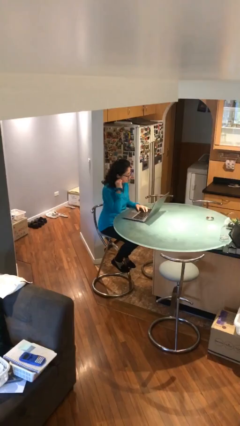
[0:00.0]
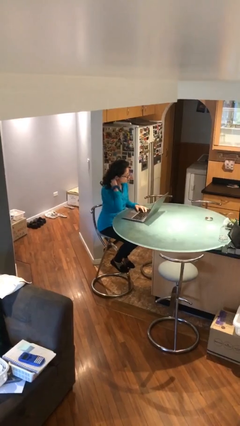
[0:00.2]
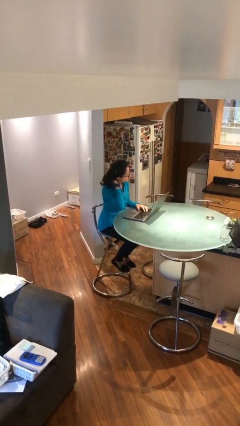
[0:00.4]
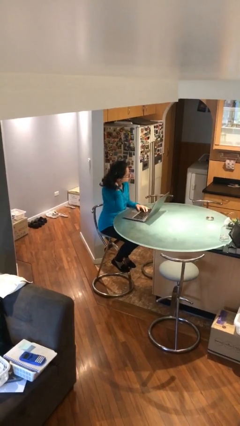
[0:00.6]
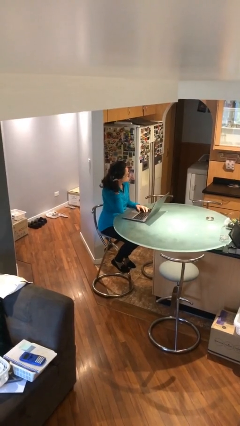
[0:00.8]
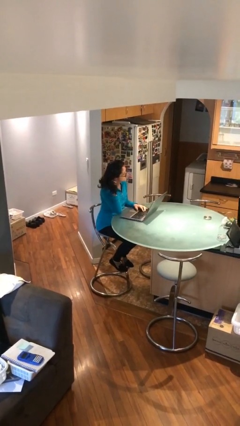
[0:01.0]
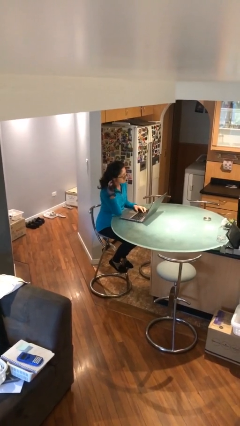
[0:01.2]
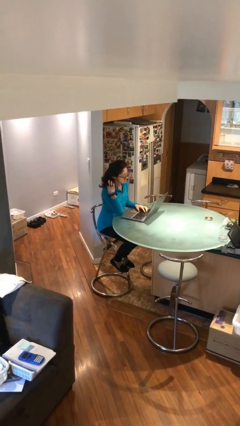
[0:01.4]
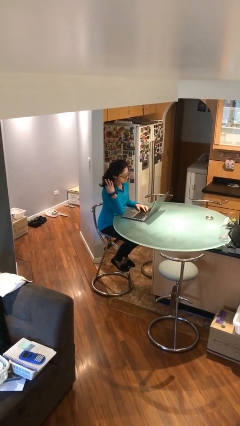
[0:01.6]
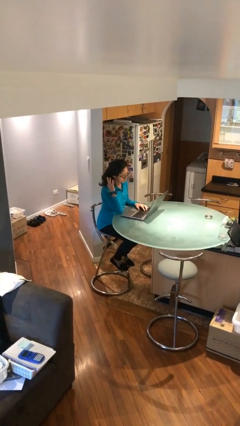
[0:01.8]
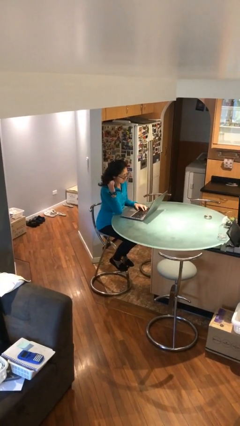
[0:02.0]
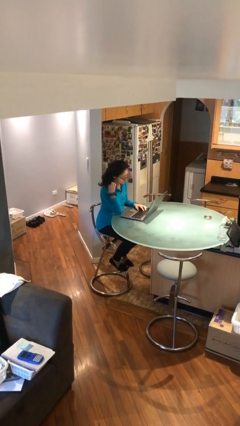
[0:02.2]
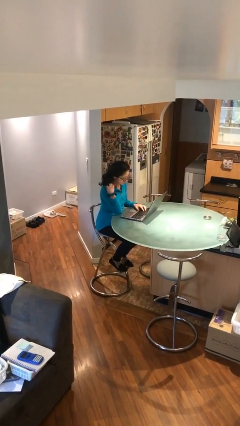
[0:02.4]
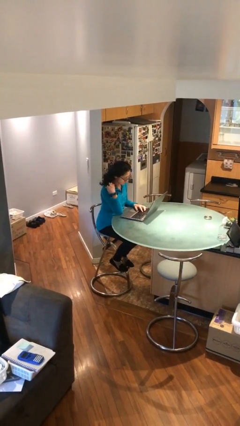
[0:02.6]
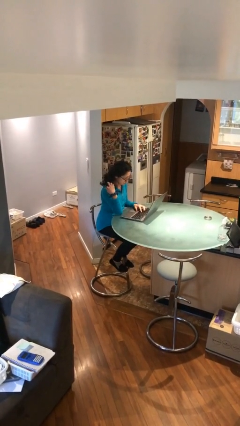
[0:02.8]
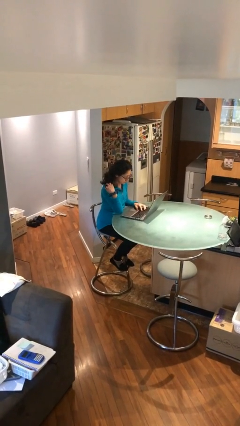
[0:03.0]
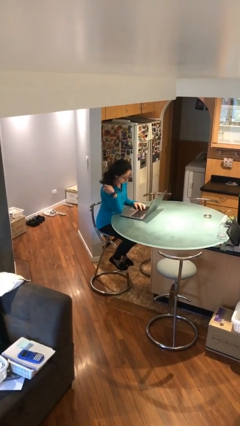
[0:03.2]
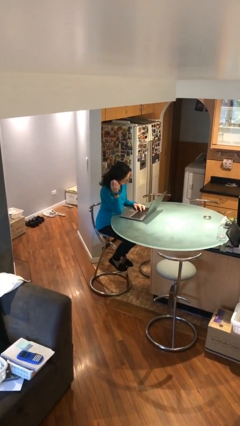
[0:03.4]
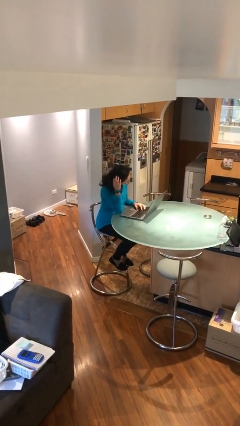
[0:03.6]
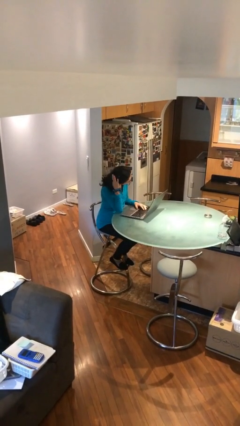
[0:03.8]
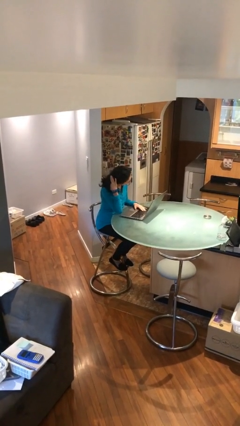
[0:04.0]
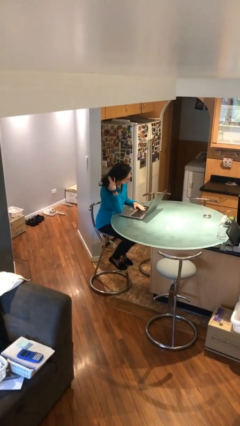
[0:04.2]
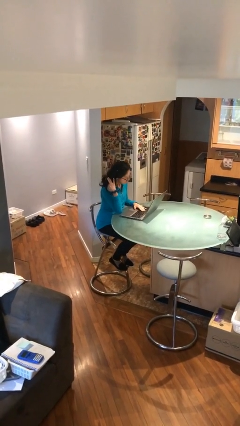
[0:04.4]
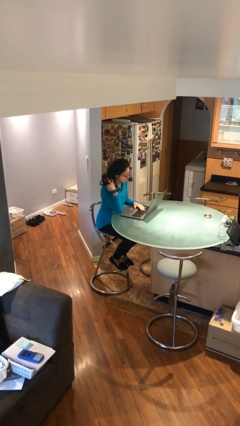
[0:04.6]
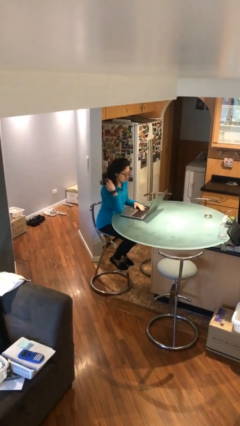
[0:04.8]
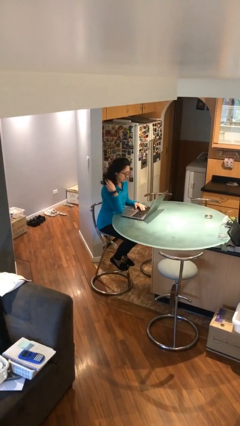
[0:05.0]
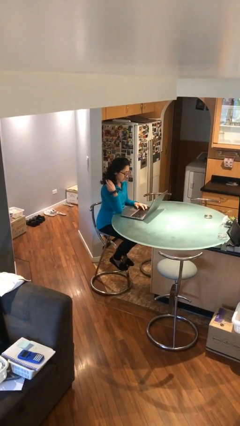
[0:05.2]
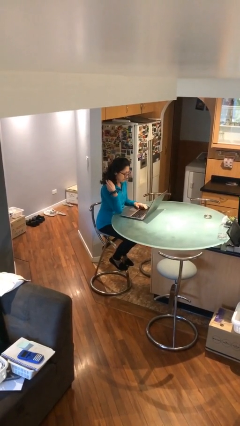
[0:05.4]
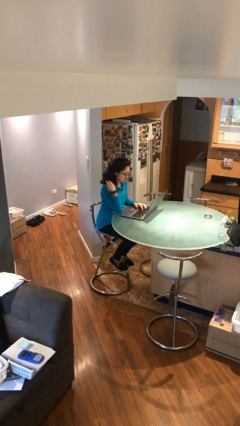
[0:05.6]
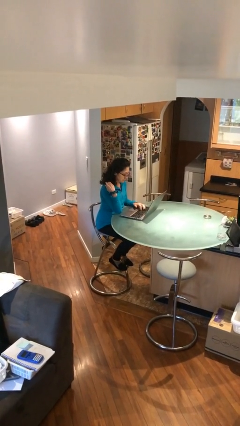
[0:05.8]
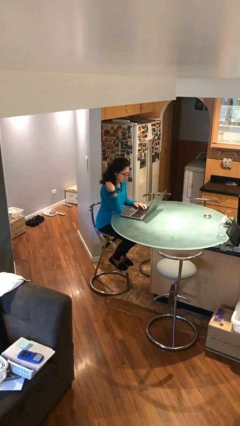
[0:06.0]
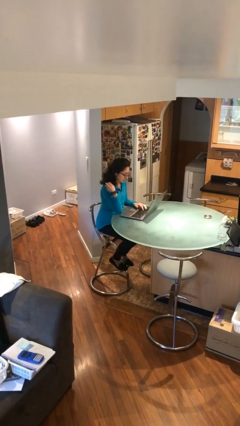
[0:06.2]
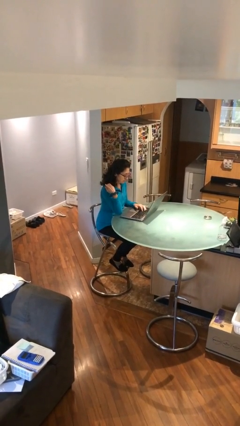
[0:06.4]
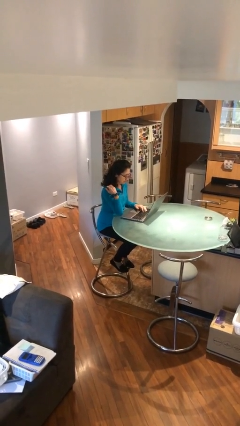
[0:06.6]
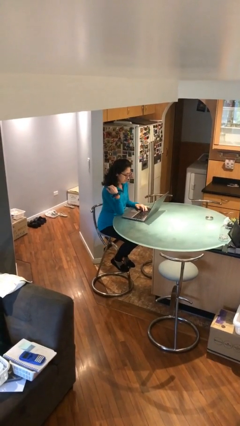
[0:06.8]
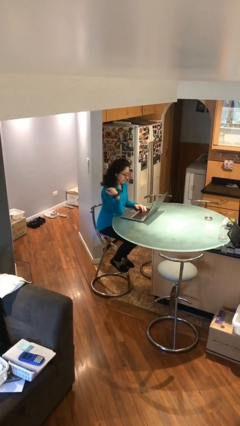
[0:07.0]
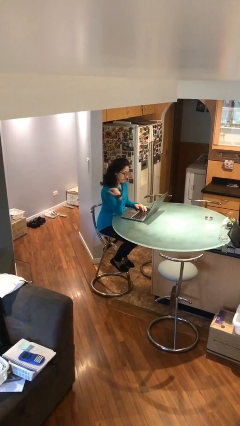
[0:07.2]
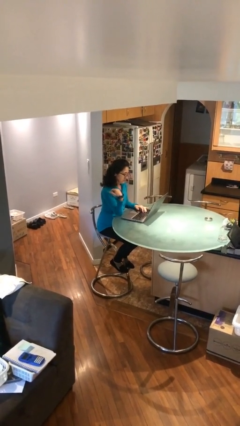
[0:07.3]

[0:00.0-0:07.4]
person interacts with laptop

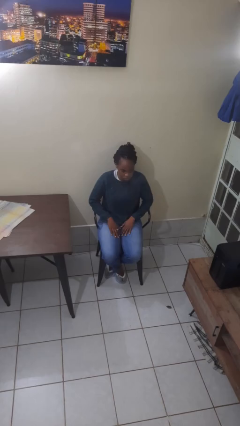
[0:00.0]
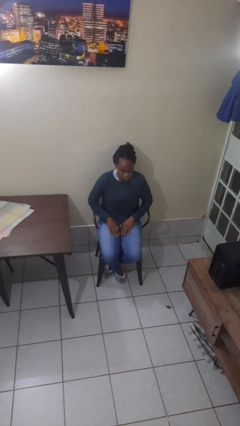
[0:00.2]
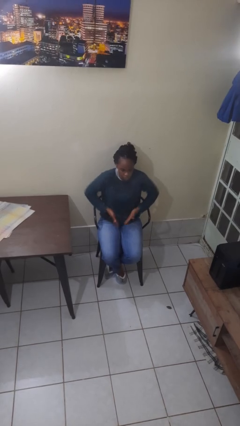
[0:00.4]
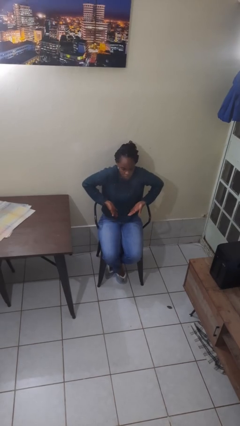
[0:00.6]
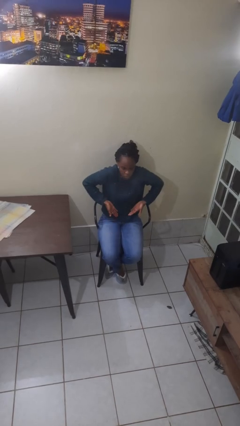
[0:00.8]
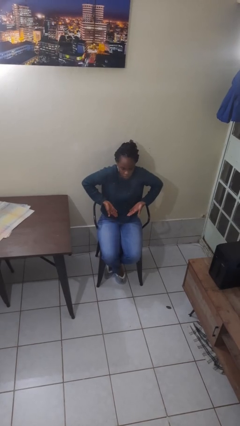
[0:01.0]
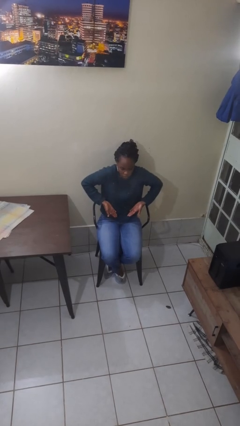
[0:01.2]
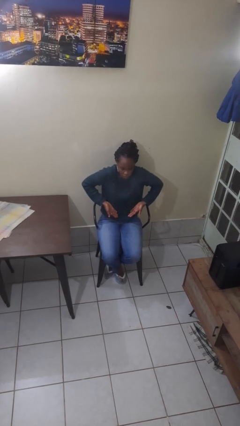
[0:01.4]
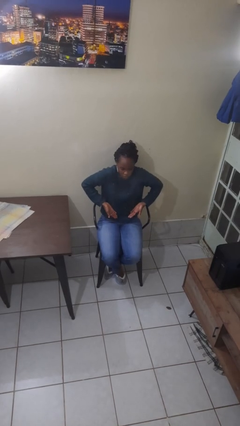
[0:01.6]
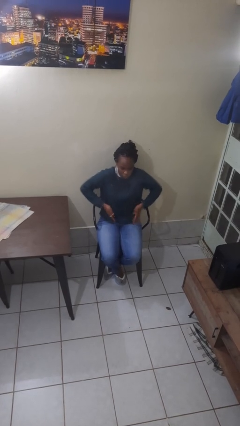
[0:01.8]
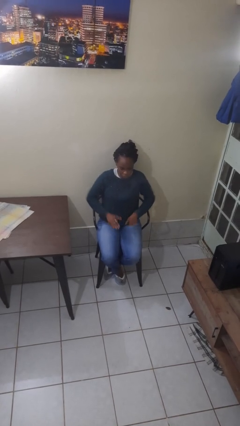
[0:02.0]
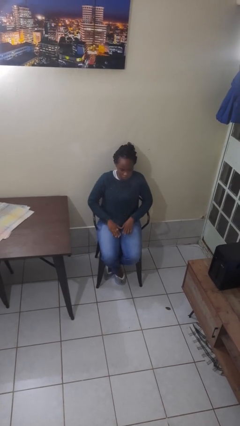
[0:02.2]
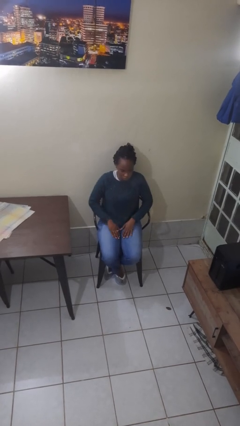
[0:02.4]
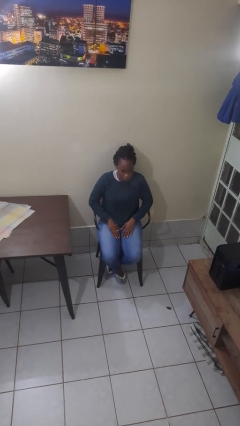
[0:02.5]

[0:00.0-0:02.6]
person shrugs

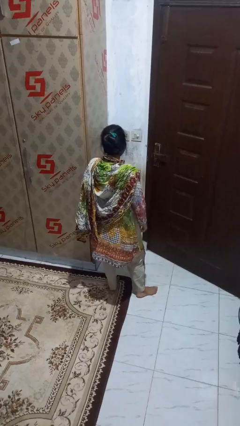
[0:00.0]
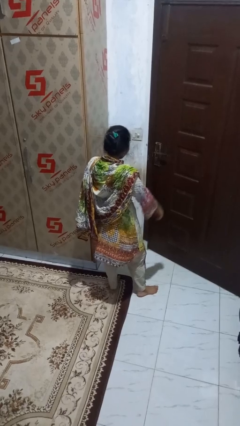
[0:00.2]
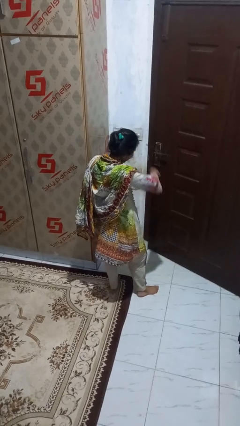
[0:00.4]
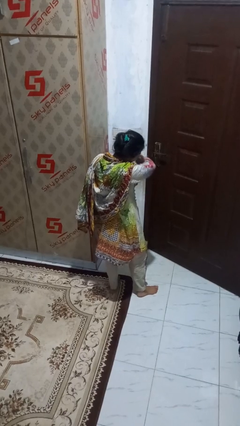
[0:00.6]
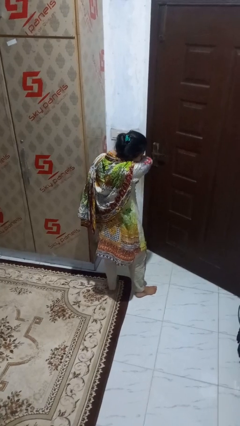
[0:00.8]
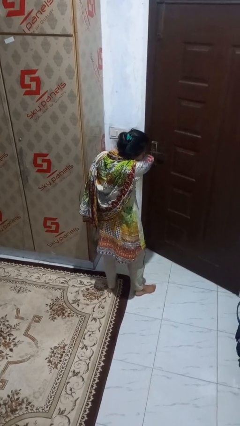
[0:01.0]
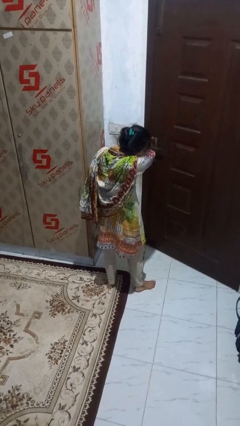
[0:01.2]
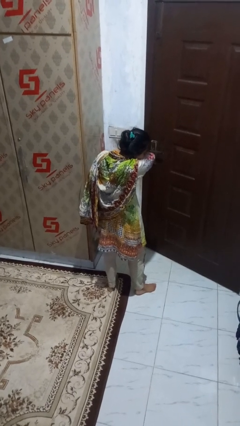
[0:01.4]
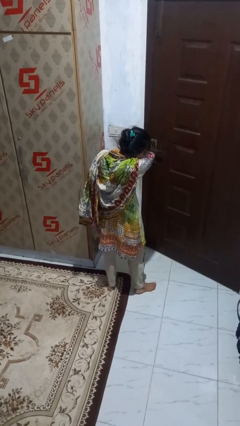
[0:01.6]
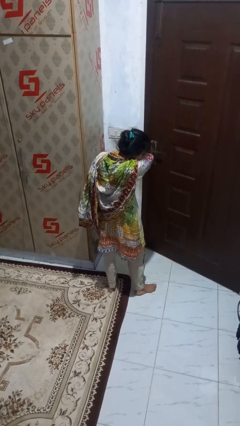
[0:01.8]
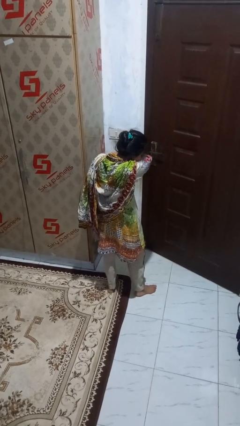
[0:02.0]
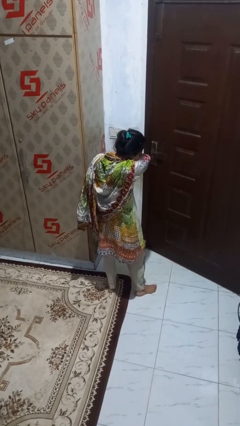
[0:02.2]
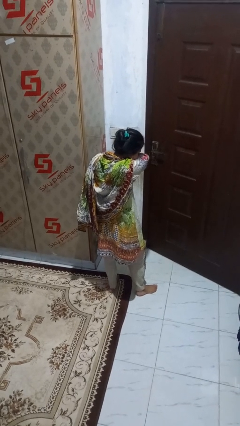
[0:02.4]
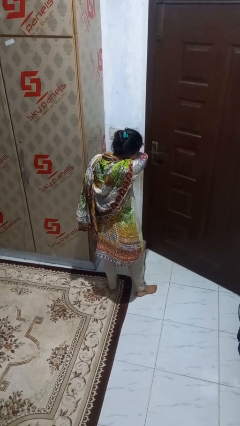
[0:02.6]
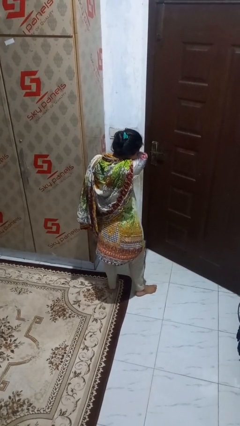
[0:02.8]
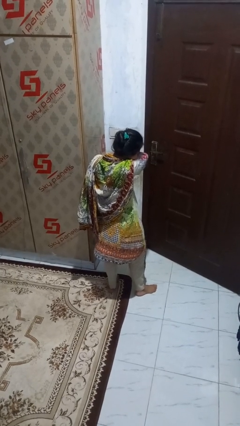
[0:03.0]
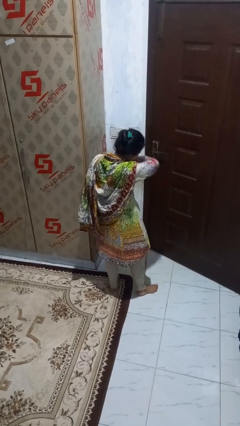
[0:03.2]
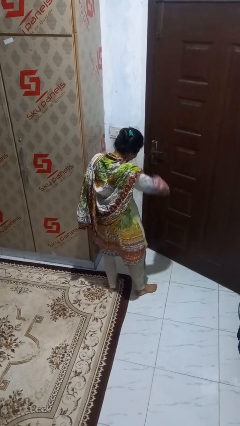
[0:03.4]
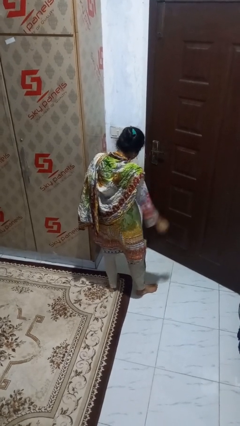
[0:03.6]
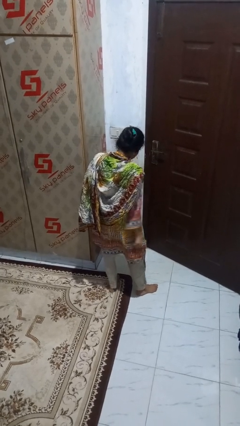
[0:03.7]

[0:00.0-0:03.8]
person sneezes into arm

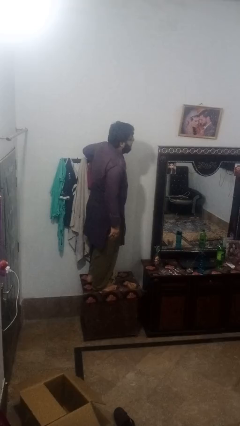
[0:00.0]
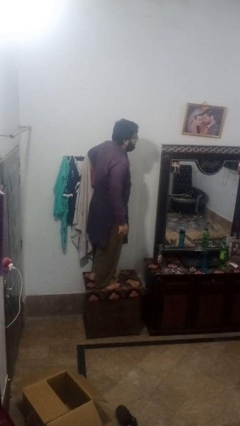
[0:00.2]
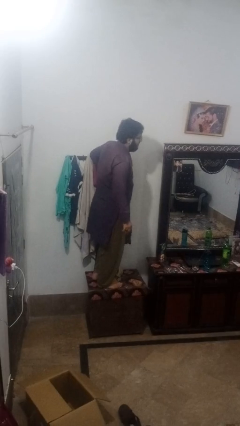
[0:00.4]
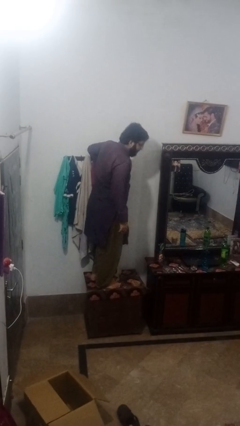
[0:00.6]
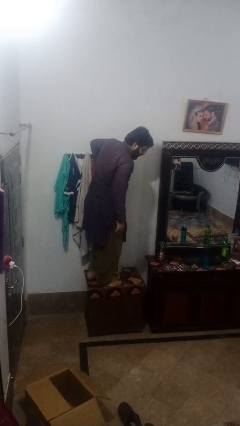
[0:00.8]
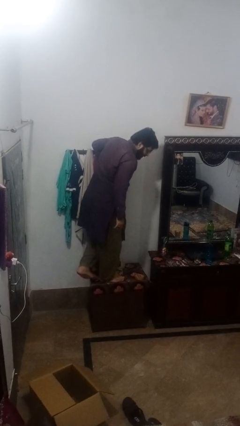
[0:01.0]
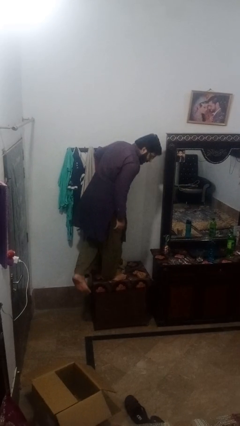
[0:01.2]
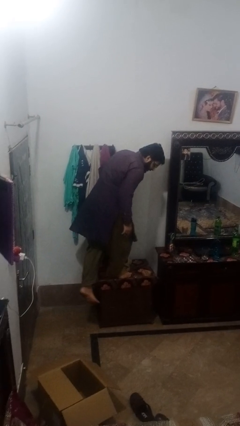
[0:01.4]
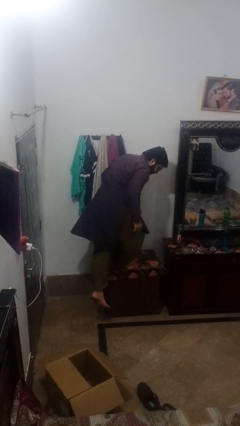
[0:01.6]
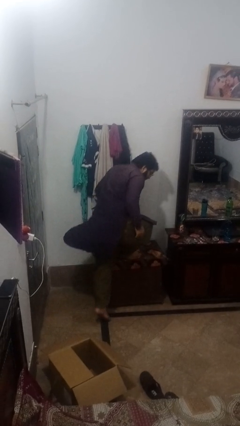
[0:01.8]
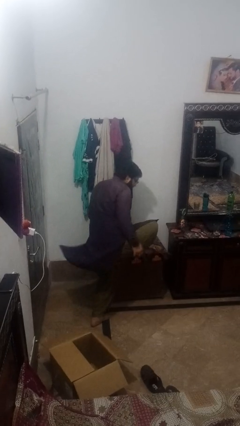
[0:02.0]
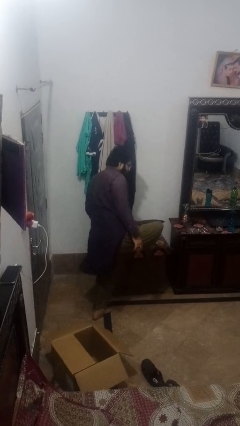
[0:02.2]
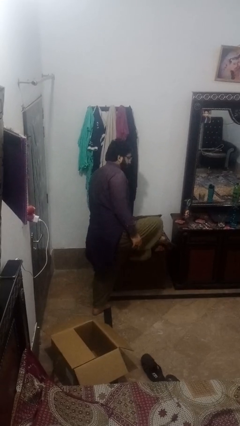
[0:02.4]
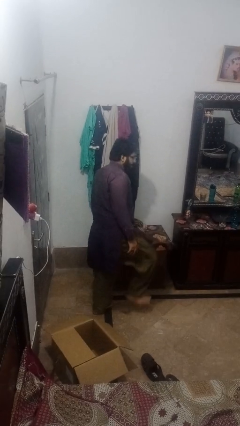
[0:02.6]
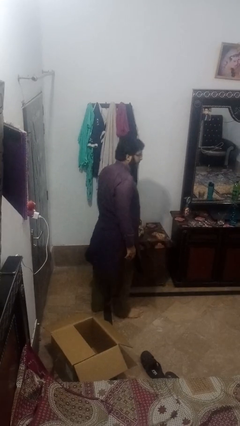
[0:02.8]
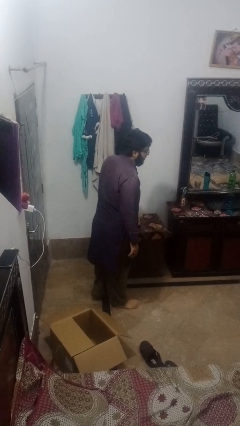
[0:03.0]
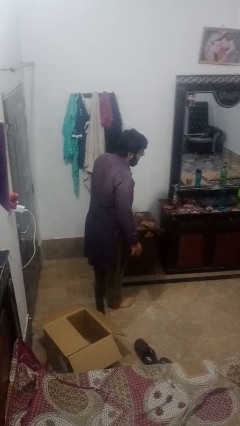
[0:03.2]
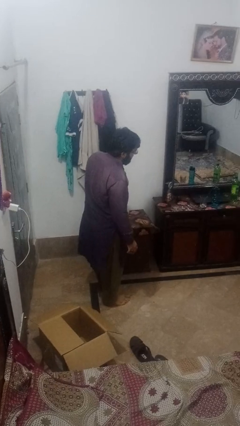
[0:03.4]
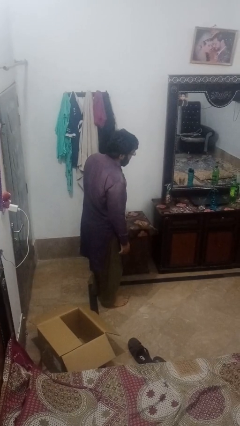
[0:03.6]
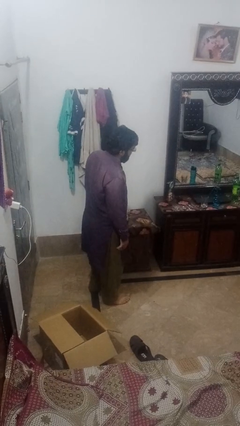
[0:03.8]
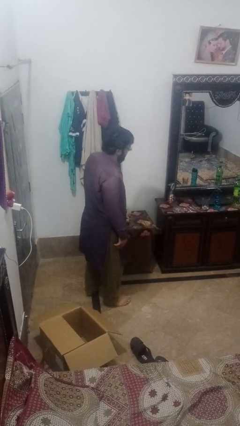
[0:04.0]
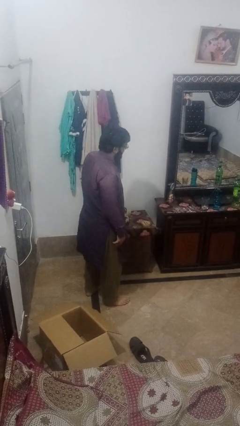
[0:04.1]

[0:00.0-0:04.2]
person climbs off table
